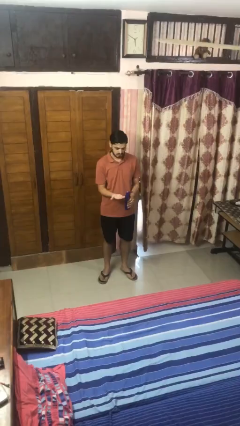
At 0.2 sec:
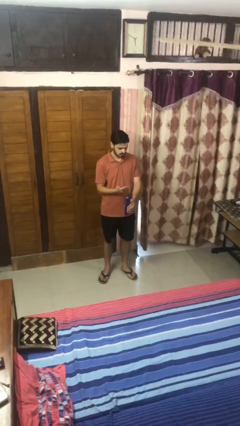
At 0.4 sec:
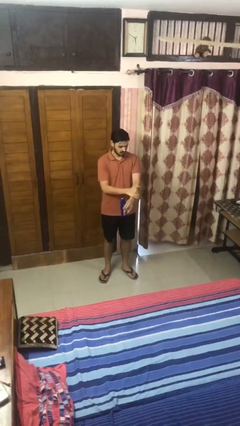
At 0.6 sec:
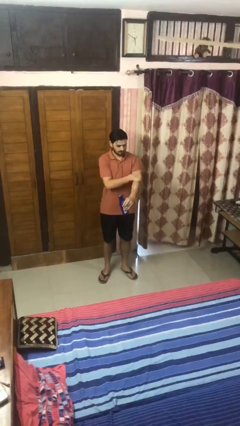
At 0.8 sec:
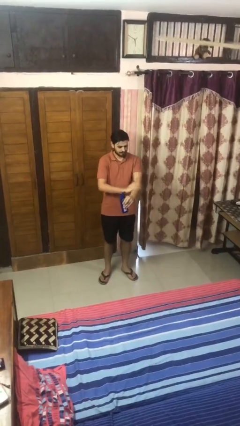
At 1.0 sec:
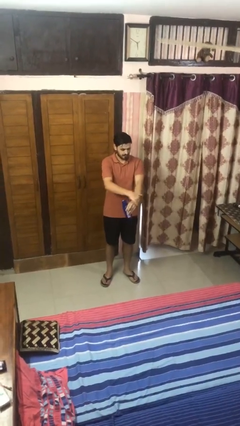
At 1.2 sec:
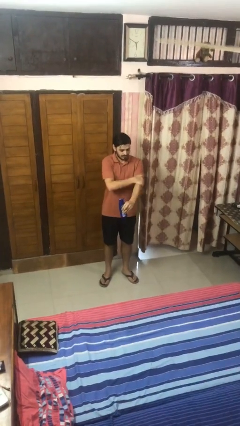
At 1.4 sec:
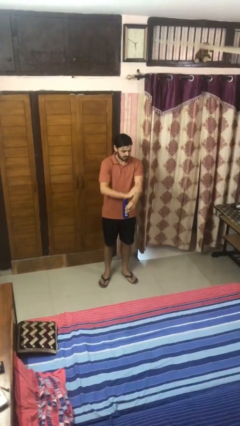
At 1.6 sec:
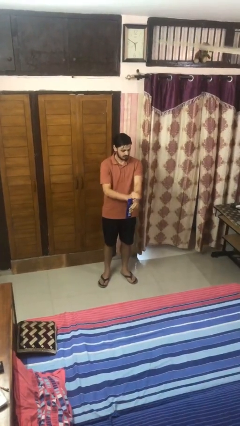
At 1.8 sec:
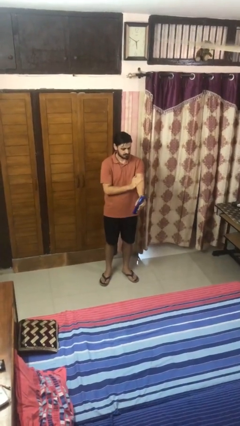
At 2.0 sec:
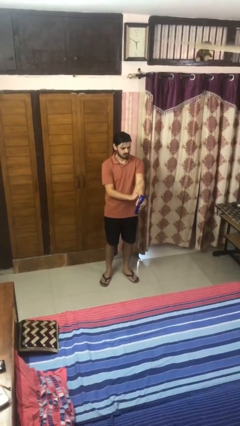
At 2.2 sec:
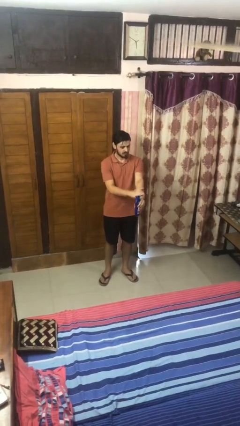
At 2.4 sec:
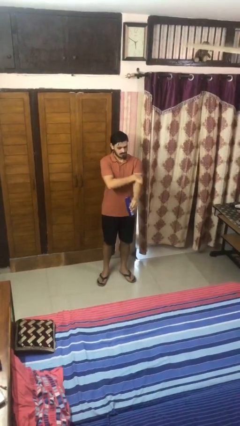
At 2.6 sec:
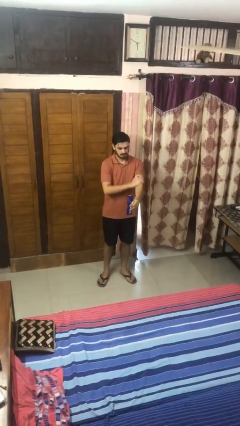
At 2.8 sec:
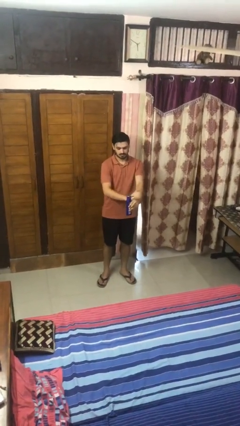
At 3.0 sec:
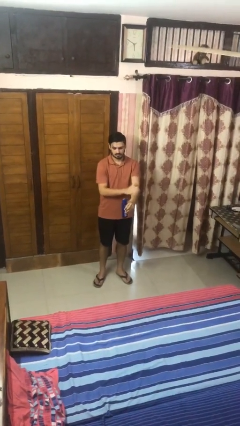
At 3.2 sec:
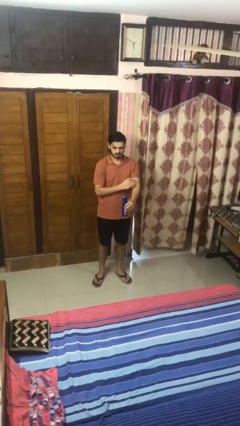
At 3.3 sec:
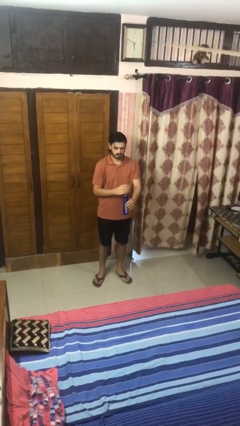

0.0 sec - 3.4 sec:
person applies sunscreen

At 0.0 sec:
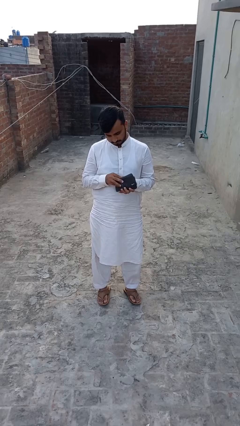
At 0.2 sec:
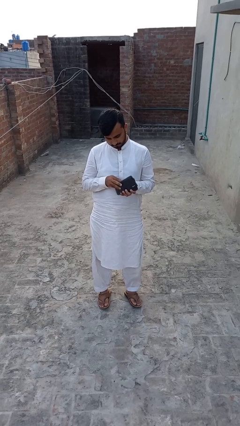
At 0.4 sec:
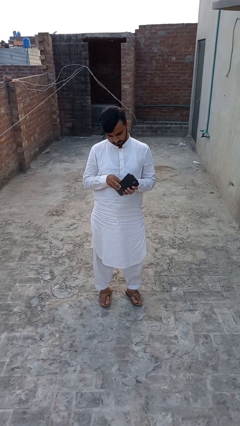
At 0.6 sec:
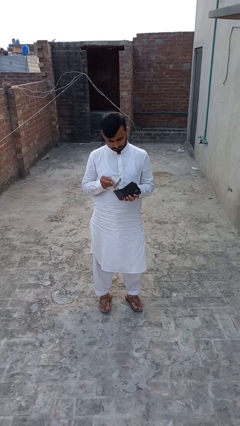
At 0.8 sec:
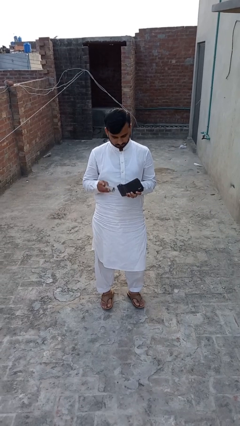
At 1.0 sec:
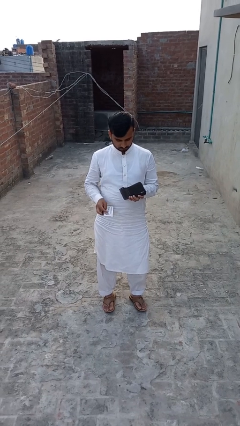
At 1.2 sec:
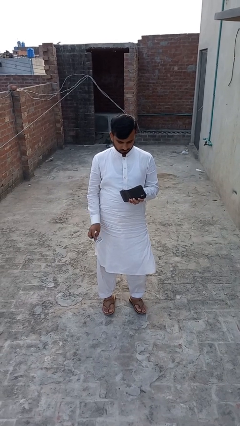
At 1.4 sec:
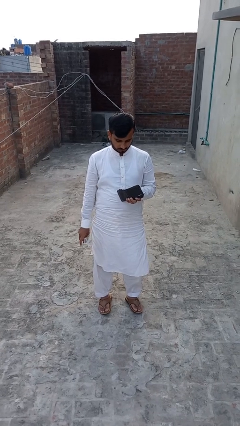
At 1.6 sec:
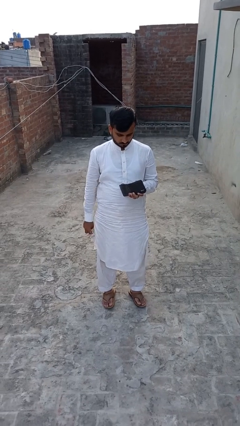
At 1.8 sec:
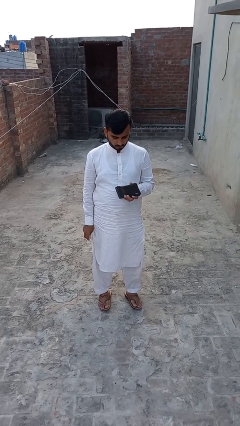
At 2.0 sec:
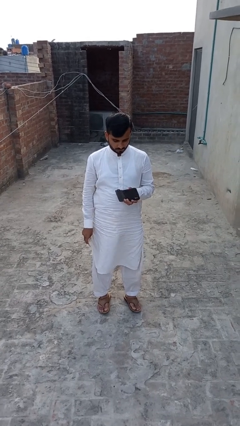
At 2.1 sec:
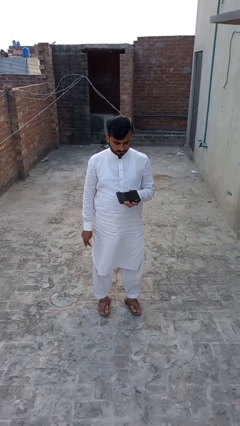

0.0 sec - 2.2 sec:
person takes object from purse

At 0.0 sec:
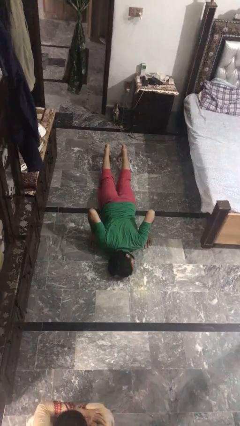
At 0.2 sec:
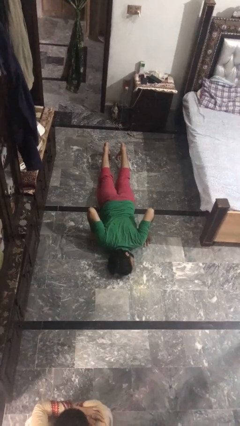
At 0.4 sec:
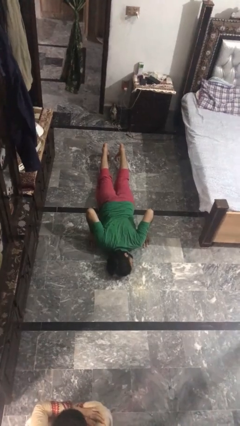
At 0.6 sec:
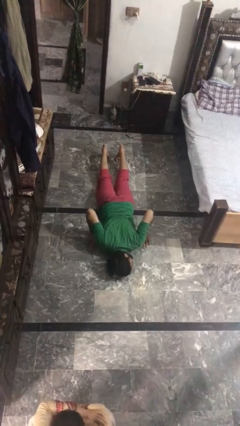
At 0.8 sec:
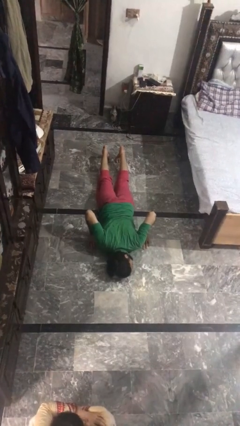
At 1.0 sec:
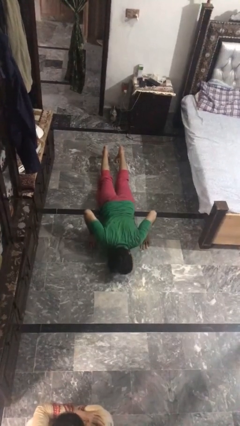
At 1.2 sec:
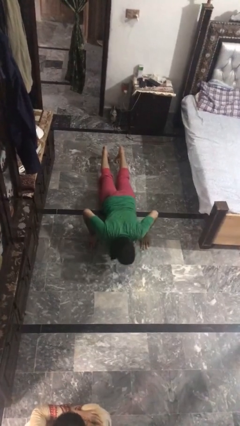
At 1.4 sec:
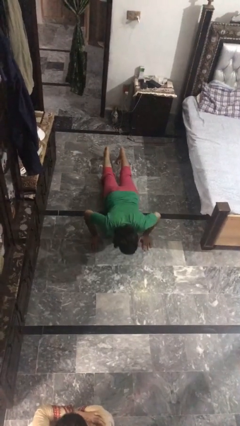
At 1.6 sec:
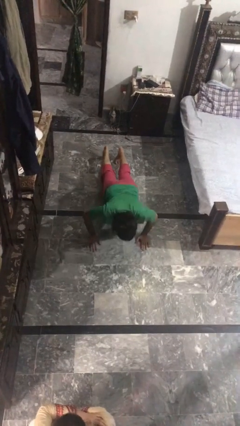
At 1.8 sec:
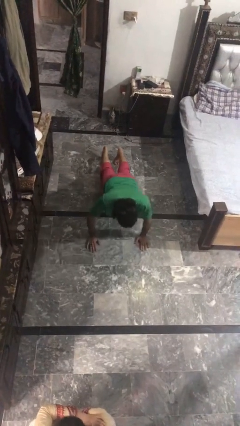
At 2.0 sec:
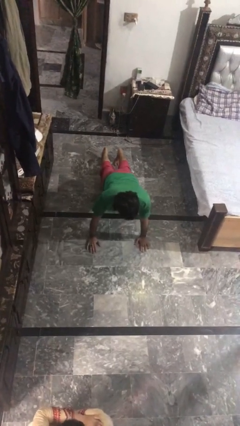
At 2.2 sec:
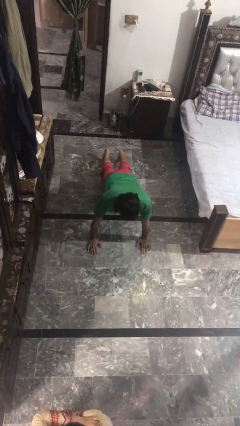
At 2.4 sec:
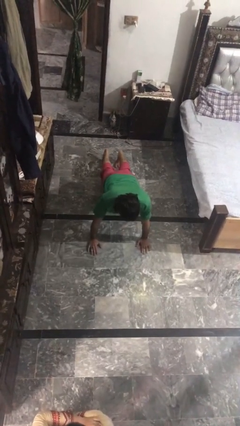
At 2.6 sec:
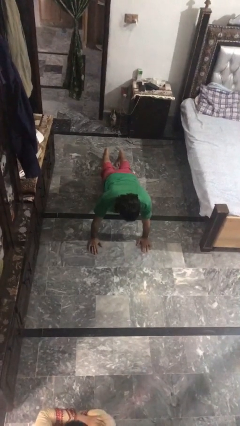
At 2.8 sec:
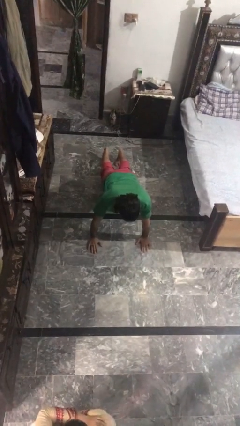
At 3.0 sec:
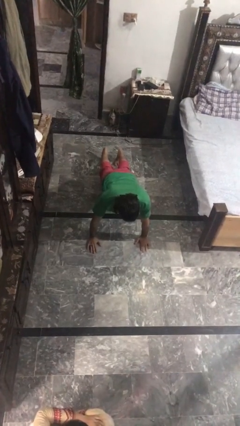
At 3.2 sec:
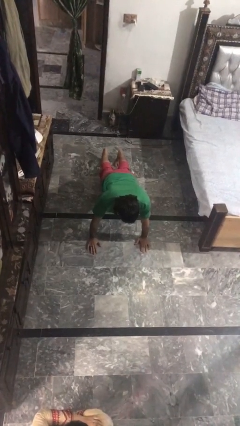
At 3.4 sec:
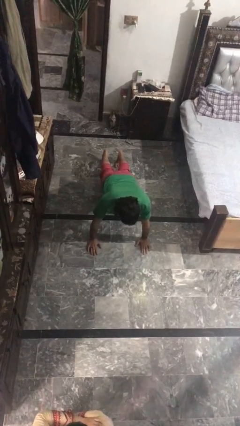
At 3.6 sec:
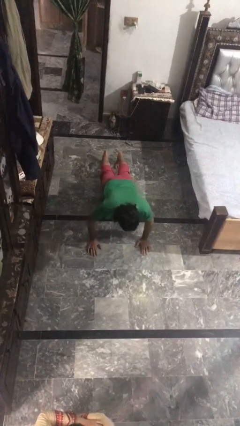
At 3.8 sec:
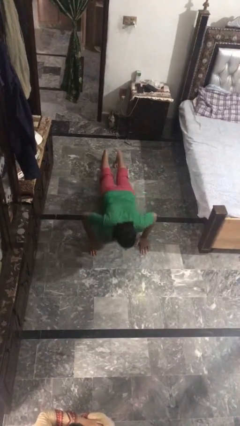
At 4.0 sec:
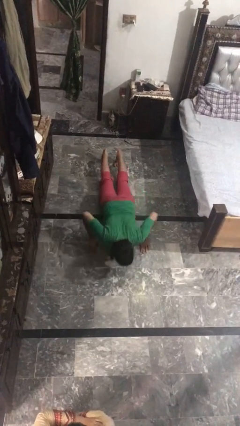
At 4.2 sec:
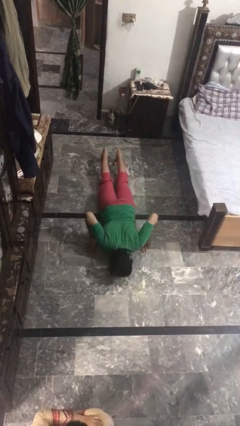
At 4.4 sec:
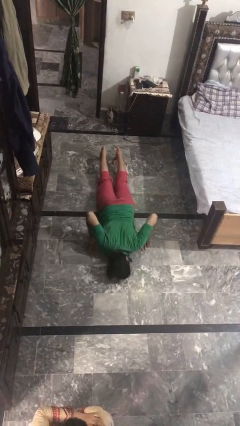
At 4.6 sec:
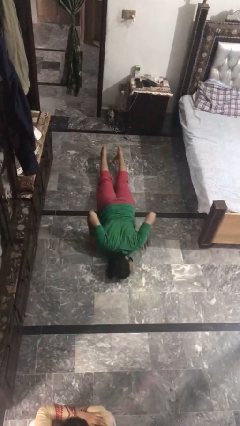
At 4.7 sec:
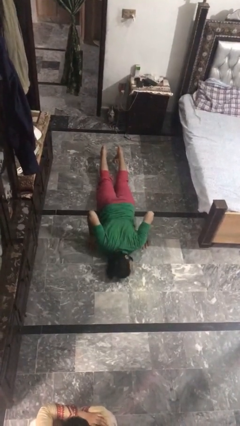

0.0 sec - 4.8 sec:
person exercises with pushup

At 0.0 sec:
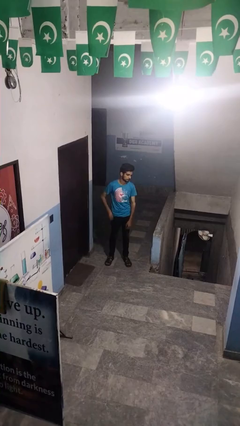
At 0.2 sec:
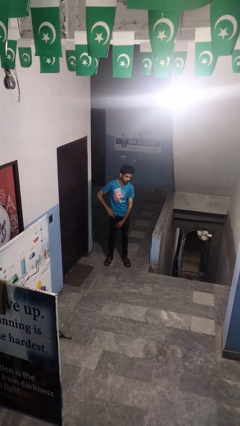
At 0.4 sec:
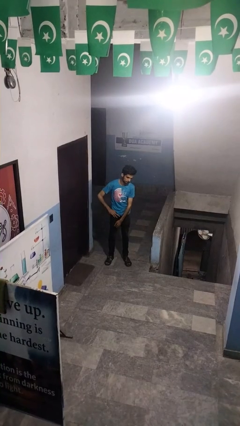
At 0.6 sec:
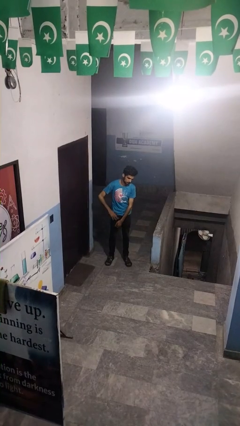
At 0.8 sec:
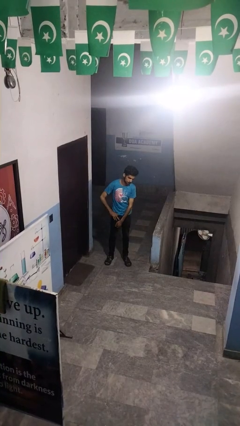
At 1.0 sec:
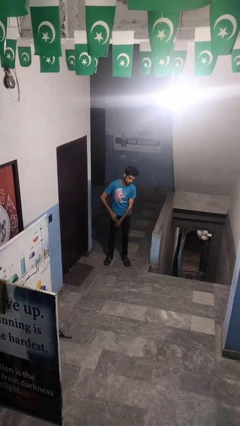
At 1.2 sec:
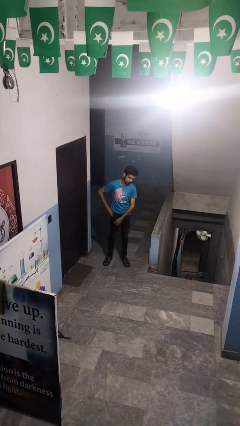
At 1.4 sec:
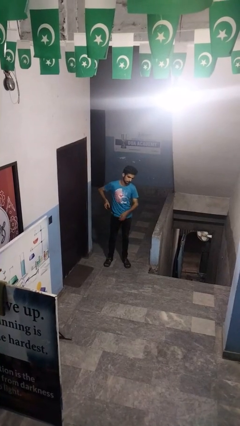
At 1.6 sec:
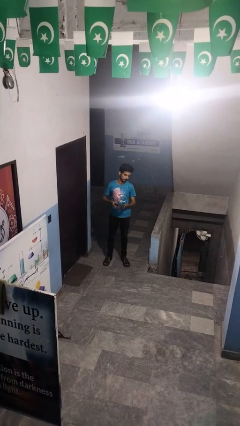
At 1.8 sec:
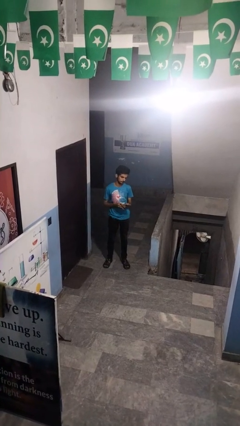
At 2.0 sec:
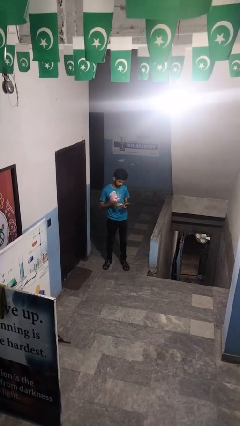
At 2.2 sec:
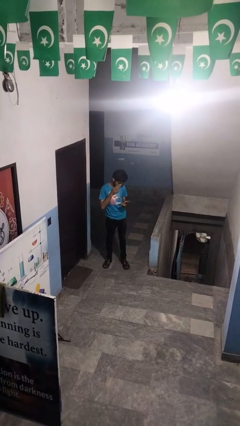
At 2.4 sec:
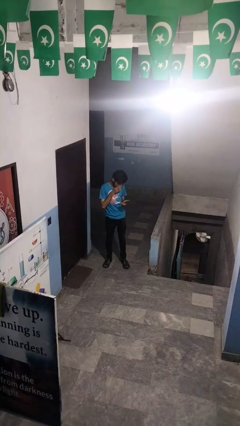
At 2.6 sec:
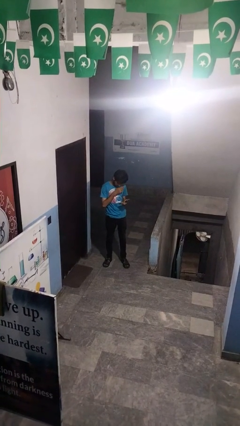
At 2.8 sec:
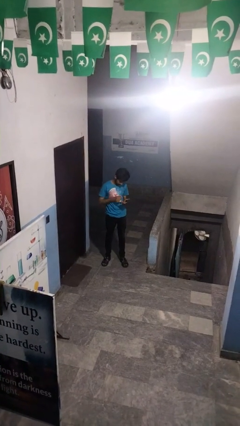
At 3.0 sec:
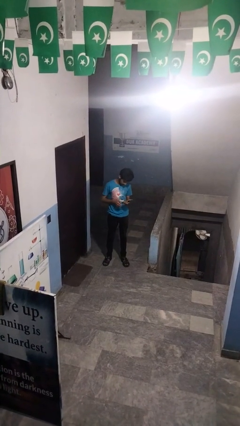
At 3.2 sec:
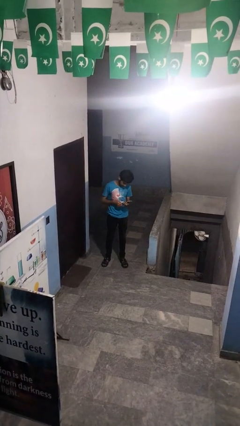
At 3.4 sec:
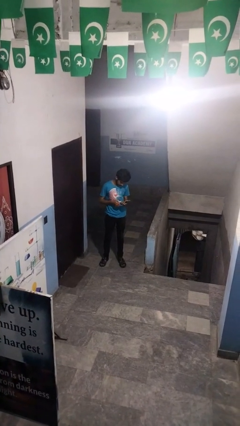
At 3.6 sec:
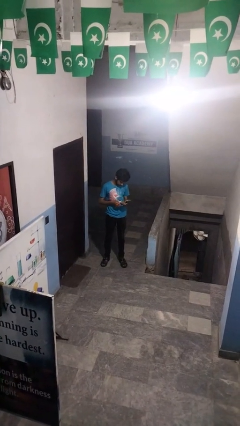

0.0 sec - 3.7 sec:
person takes phone from pocket

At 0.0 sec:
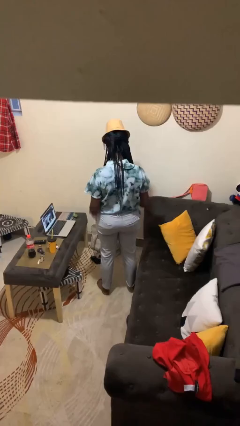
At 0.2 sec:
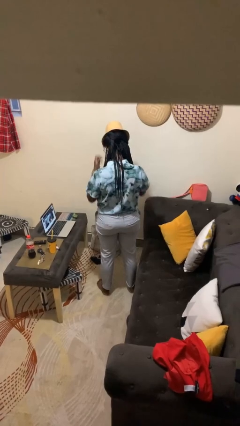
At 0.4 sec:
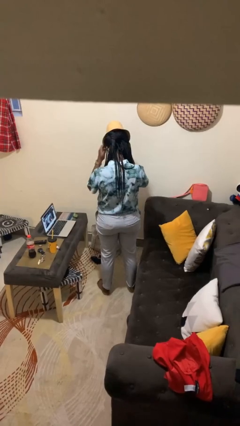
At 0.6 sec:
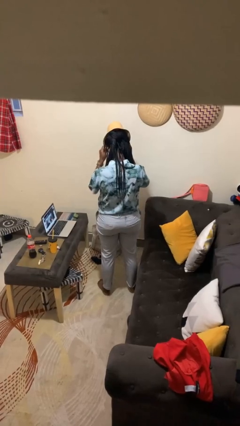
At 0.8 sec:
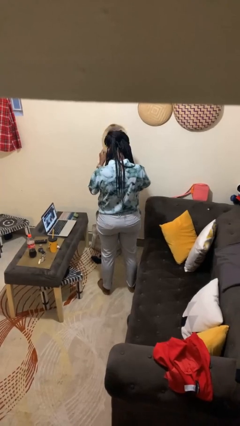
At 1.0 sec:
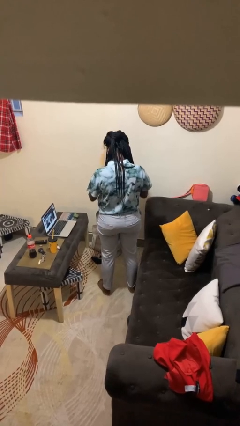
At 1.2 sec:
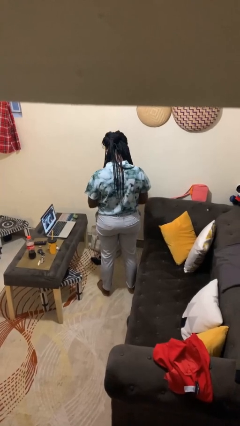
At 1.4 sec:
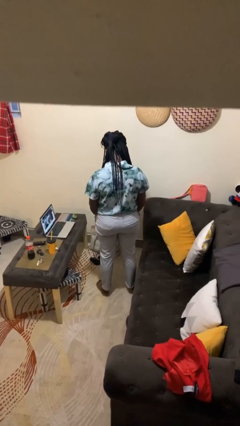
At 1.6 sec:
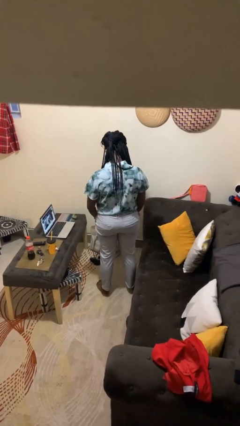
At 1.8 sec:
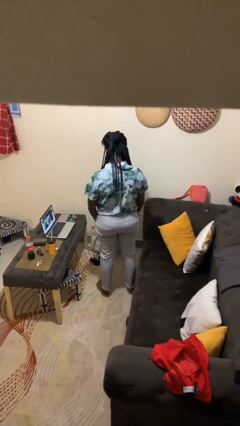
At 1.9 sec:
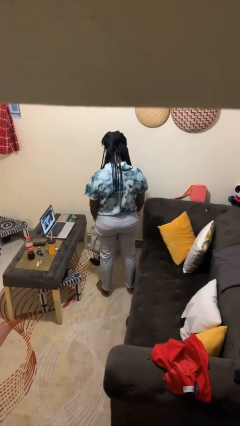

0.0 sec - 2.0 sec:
person takes off hat

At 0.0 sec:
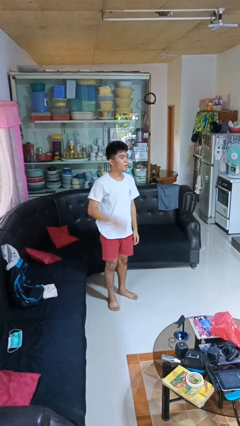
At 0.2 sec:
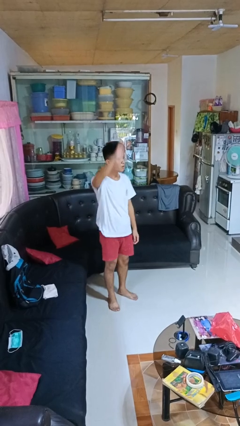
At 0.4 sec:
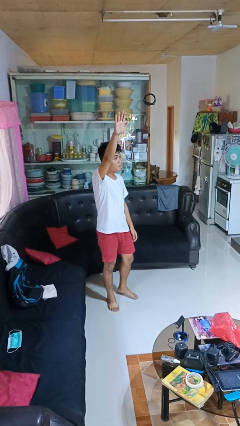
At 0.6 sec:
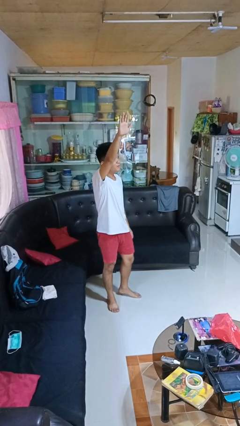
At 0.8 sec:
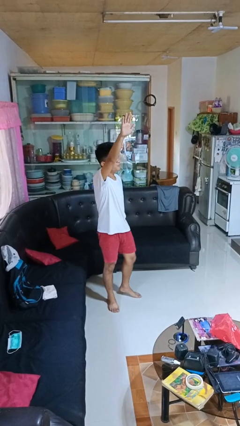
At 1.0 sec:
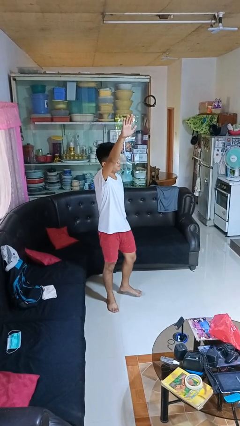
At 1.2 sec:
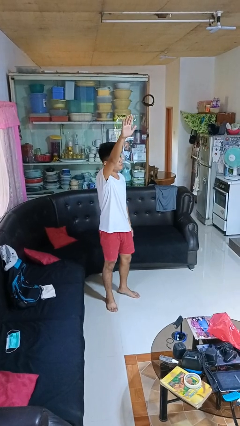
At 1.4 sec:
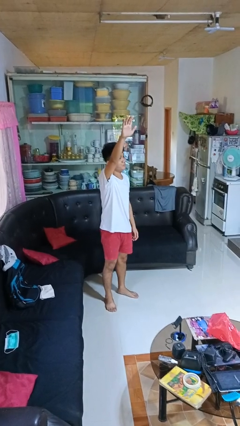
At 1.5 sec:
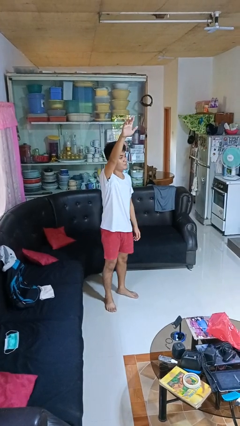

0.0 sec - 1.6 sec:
person gestures raise hand
